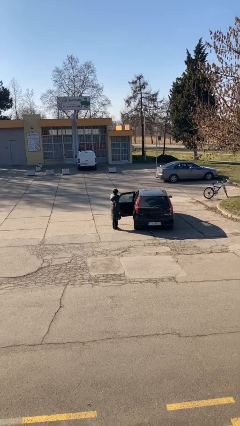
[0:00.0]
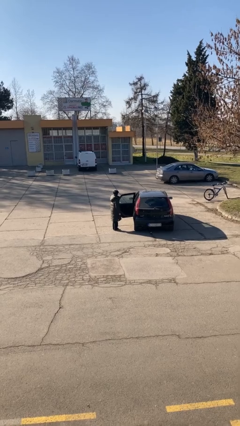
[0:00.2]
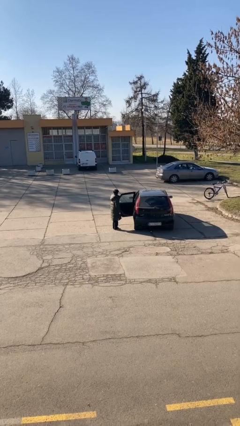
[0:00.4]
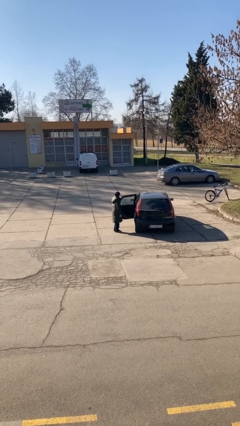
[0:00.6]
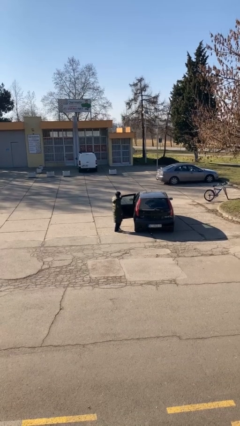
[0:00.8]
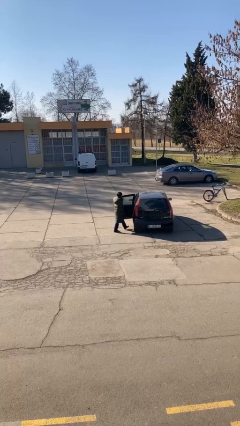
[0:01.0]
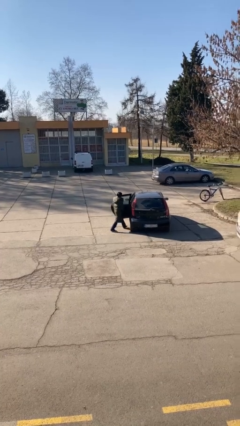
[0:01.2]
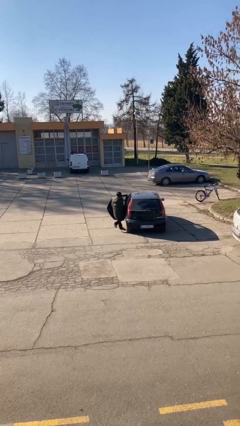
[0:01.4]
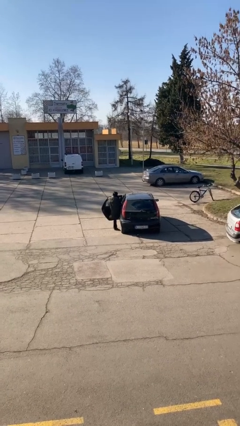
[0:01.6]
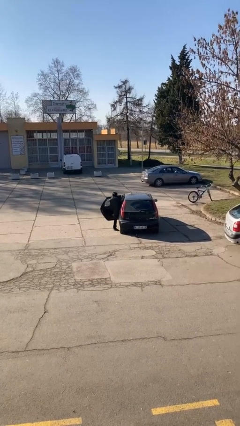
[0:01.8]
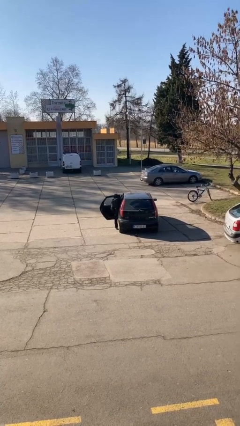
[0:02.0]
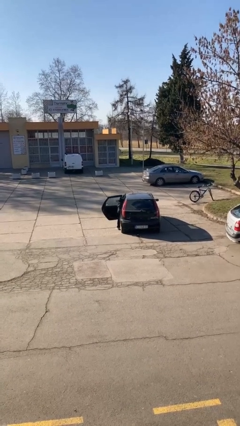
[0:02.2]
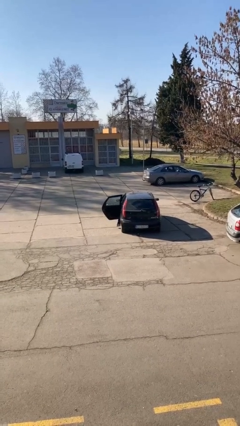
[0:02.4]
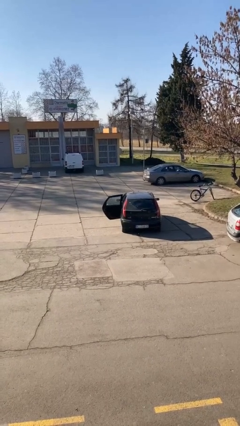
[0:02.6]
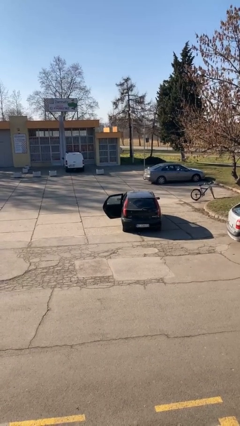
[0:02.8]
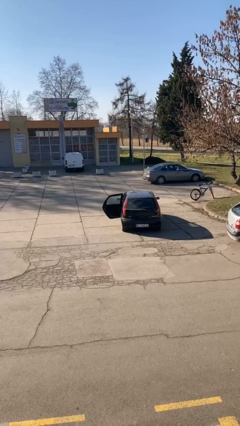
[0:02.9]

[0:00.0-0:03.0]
person enters car

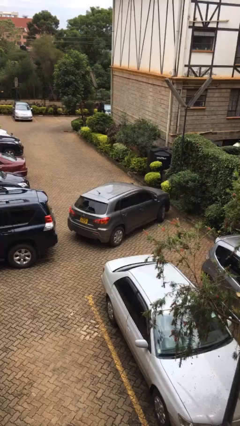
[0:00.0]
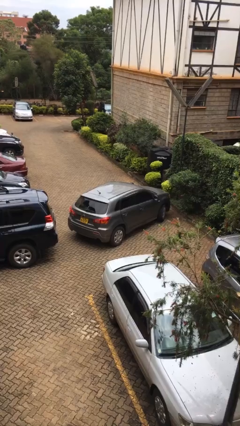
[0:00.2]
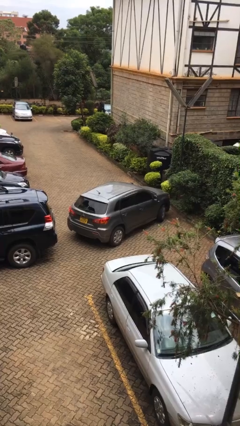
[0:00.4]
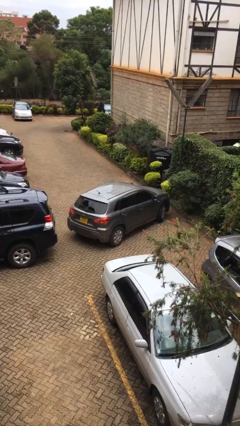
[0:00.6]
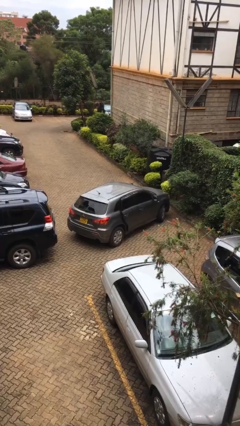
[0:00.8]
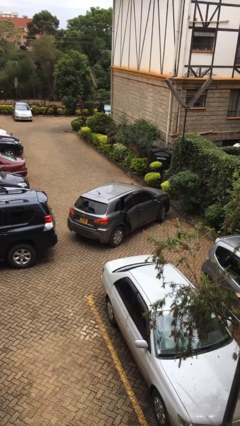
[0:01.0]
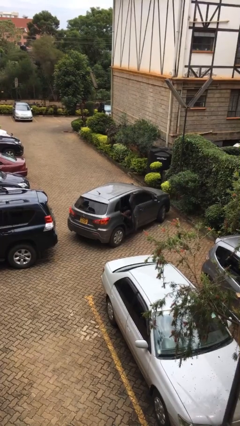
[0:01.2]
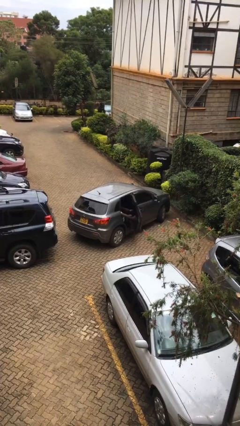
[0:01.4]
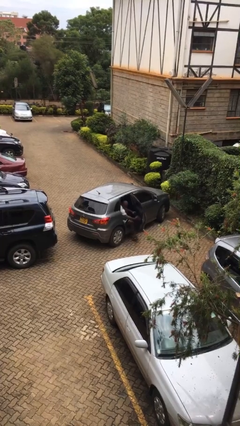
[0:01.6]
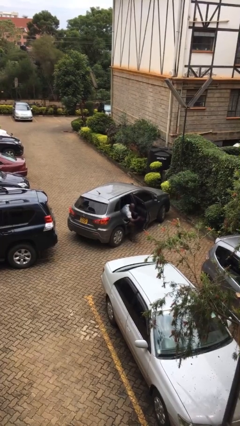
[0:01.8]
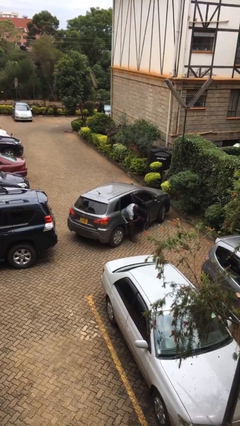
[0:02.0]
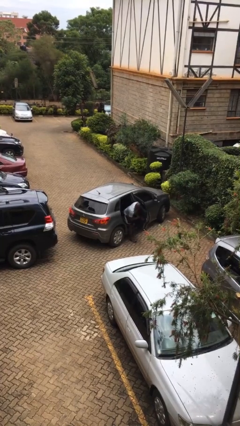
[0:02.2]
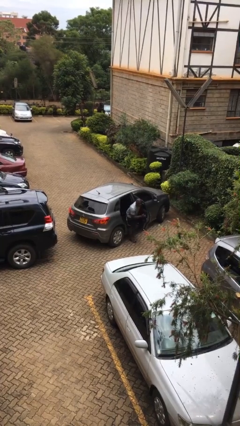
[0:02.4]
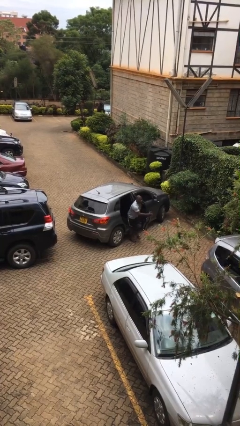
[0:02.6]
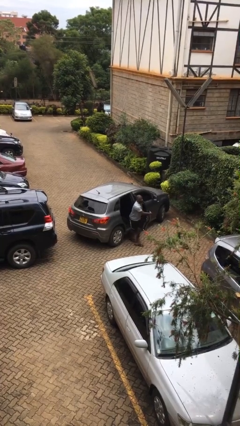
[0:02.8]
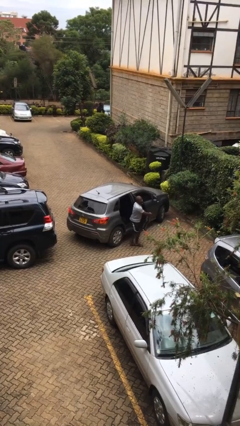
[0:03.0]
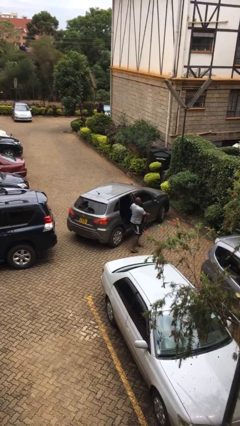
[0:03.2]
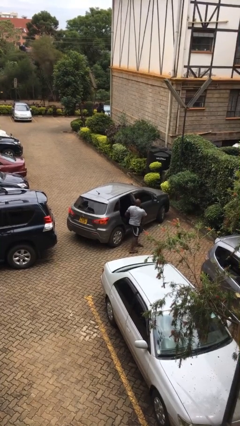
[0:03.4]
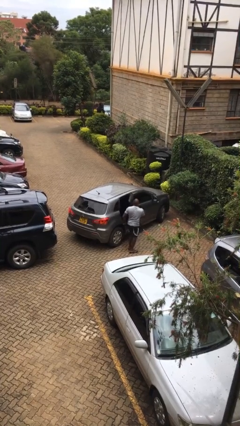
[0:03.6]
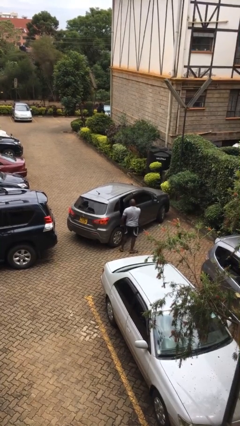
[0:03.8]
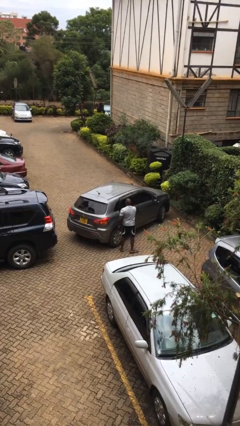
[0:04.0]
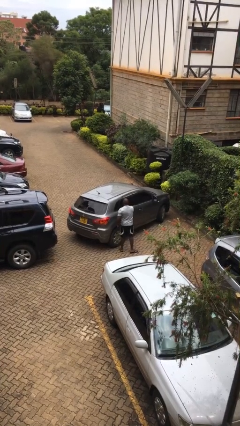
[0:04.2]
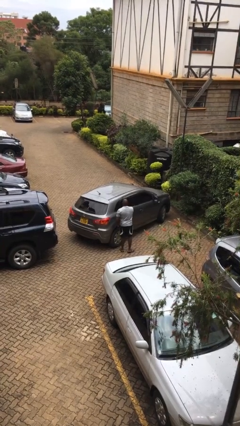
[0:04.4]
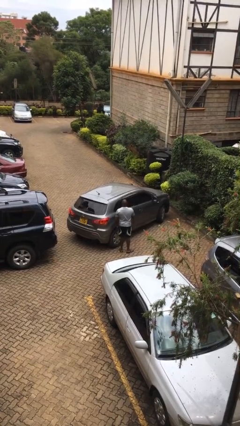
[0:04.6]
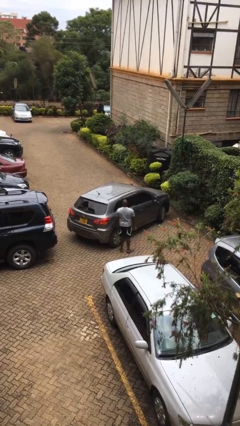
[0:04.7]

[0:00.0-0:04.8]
car drops off person

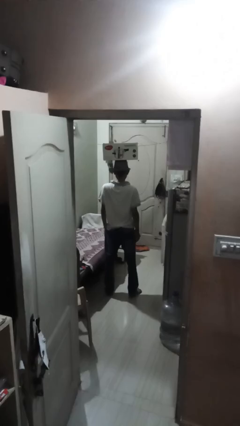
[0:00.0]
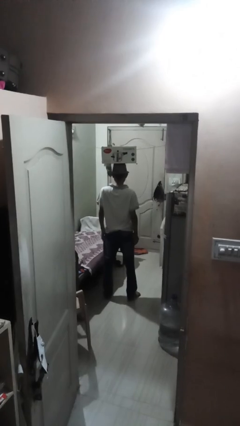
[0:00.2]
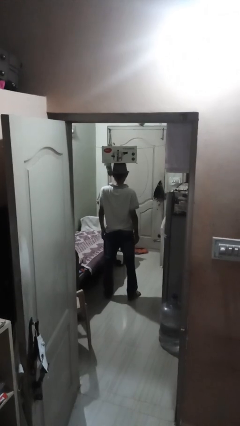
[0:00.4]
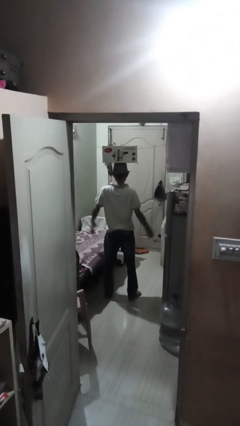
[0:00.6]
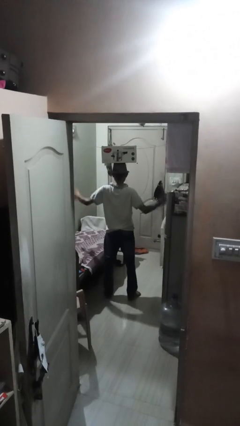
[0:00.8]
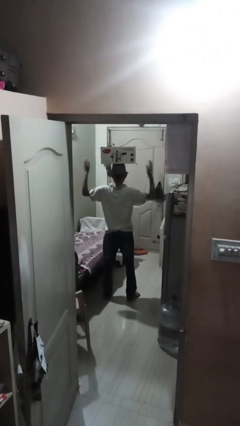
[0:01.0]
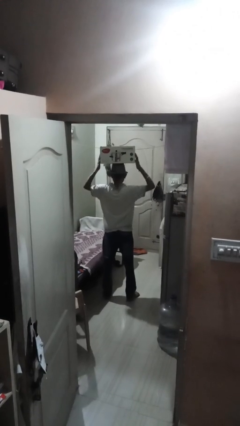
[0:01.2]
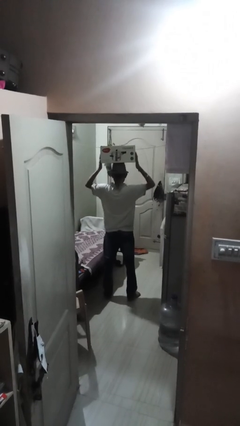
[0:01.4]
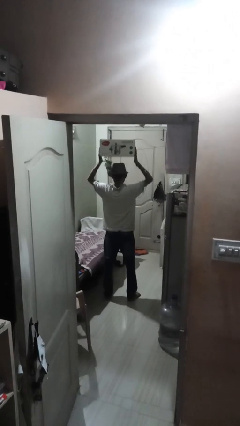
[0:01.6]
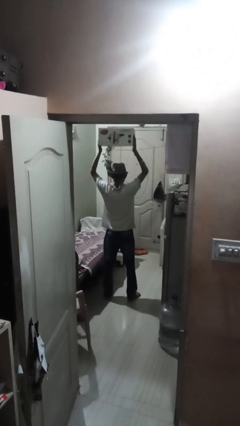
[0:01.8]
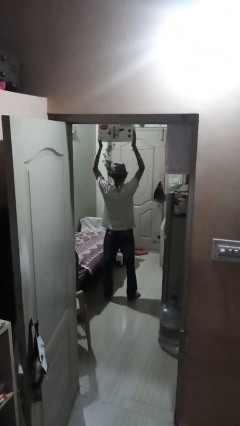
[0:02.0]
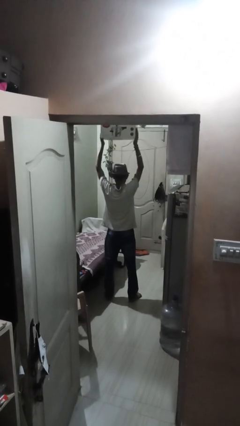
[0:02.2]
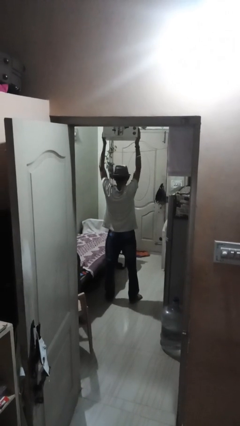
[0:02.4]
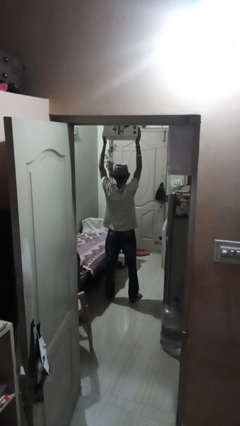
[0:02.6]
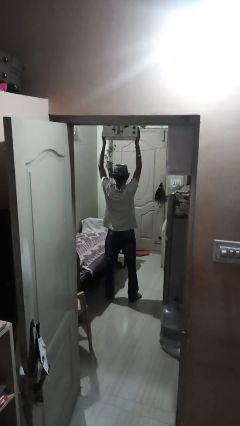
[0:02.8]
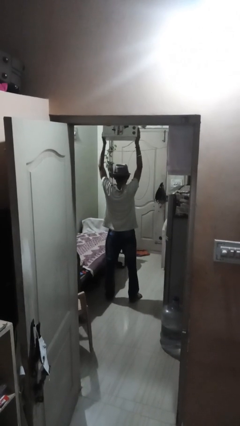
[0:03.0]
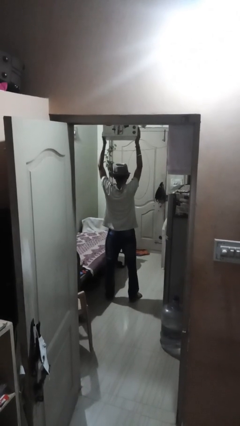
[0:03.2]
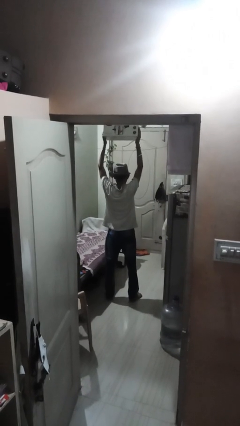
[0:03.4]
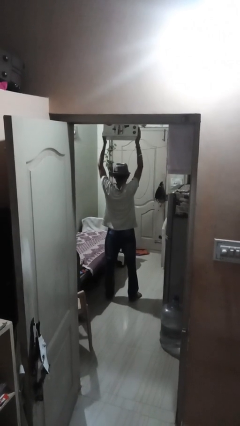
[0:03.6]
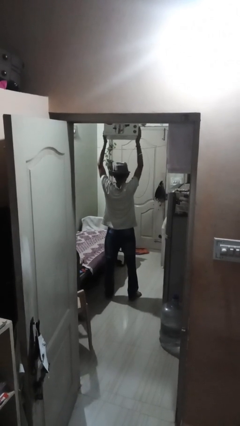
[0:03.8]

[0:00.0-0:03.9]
person holds object above head

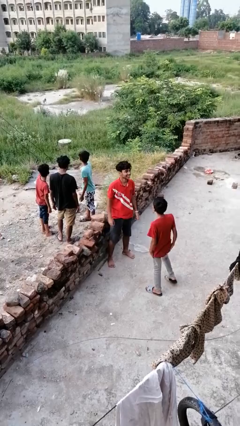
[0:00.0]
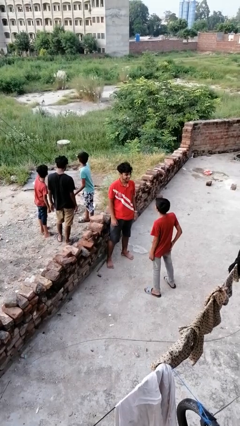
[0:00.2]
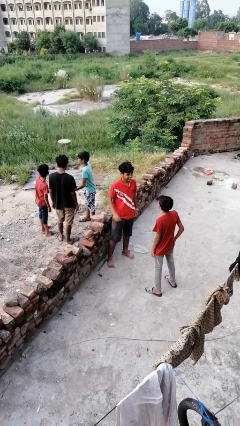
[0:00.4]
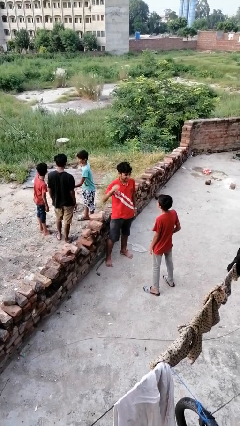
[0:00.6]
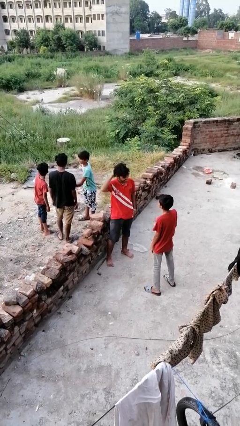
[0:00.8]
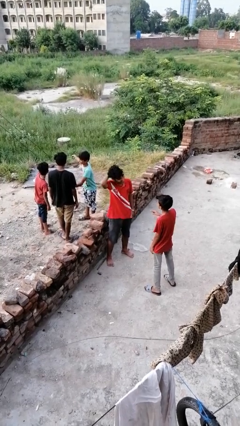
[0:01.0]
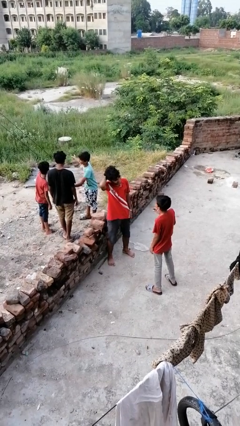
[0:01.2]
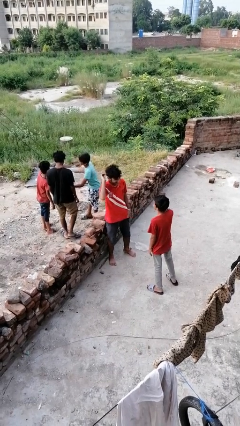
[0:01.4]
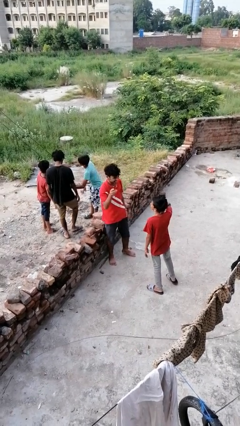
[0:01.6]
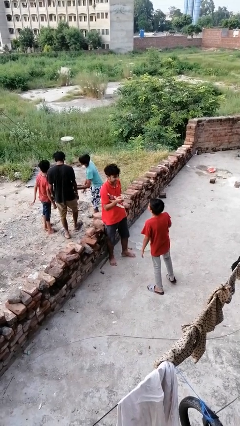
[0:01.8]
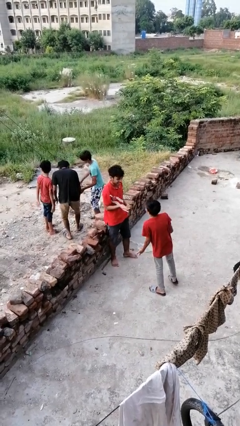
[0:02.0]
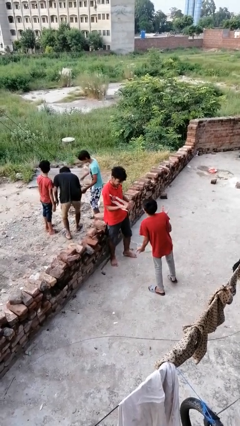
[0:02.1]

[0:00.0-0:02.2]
person laughs with person

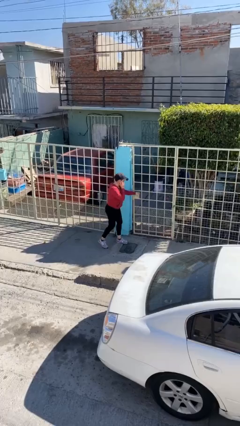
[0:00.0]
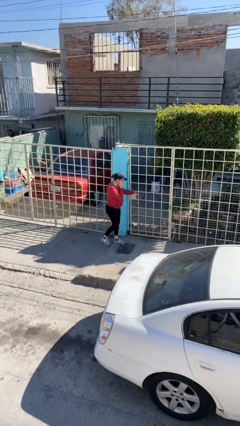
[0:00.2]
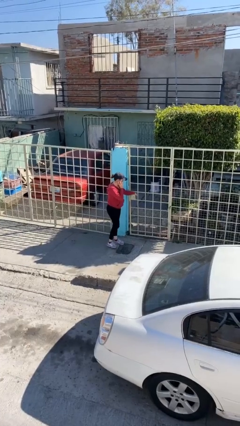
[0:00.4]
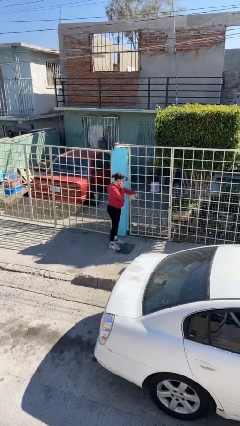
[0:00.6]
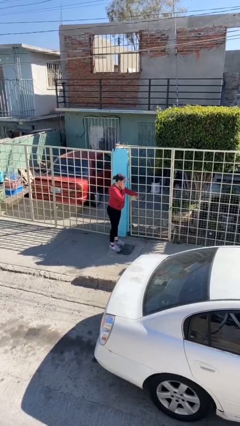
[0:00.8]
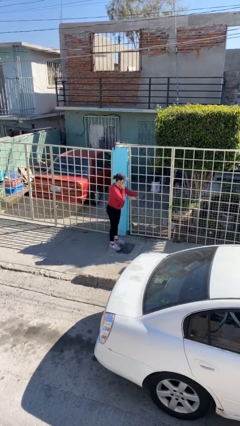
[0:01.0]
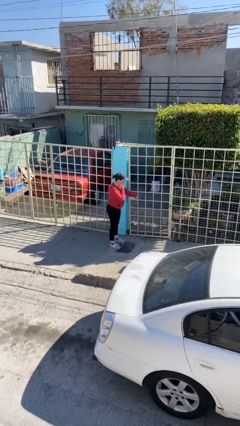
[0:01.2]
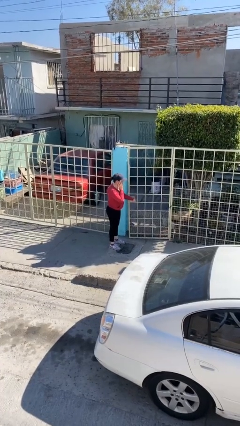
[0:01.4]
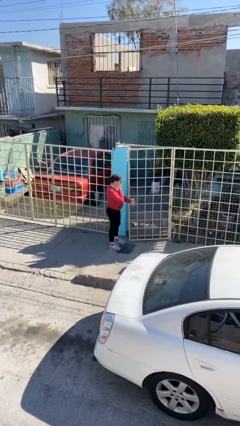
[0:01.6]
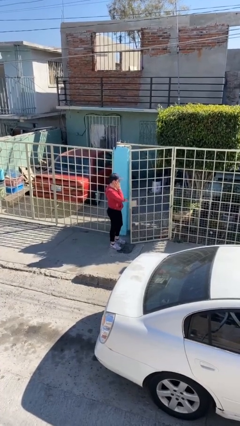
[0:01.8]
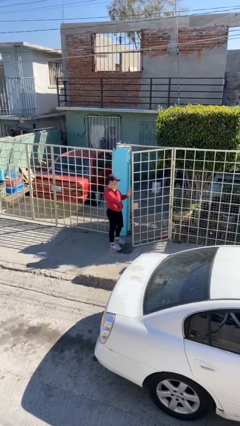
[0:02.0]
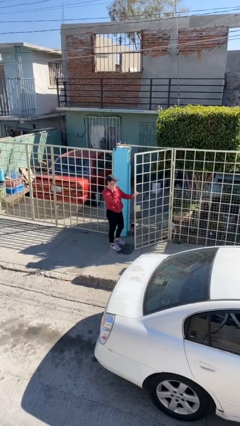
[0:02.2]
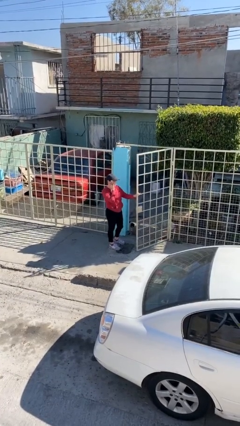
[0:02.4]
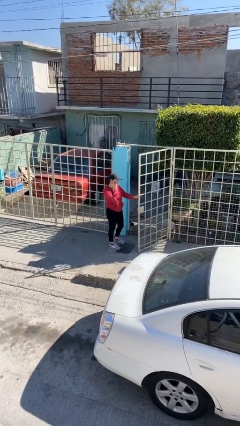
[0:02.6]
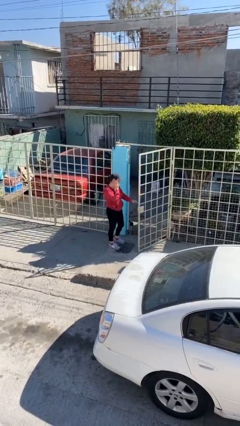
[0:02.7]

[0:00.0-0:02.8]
person opens facility door

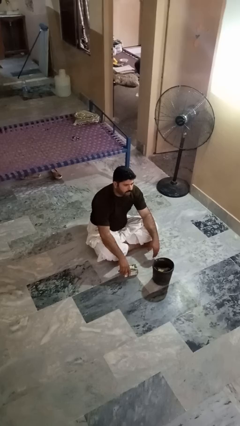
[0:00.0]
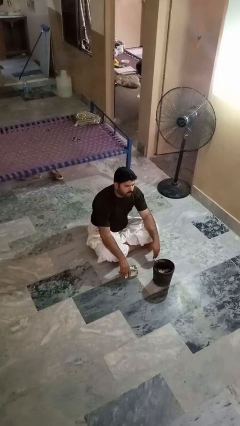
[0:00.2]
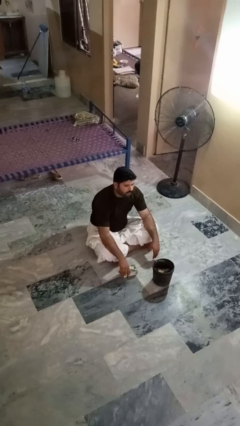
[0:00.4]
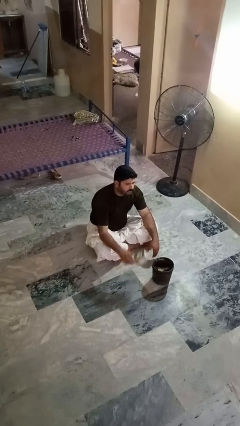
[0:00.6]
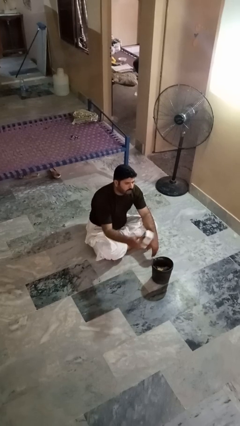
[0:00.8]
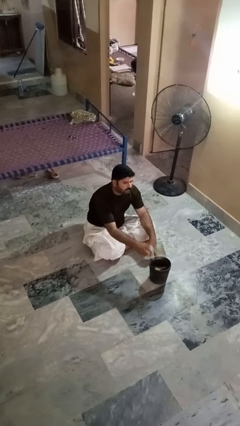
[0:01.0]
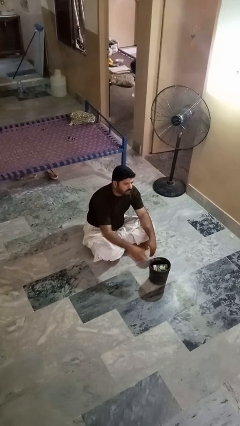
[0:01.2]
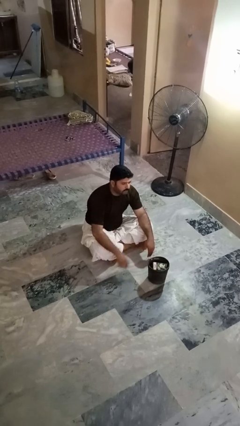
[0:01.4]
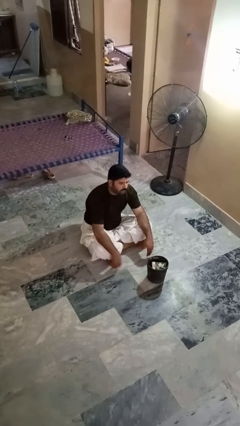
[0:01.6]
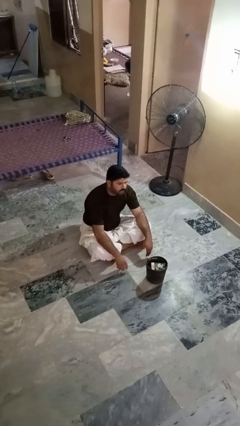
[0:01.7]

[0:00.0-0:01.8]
person puts object into basket
